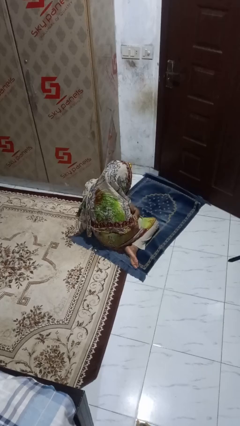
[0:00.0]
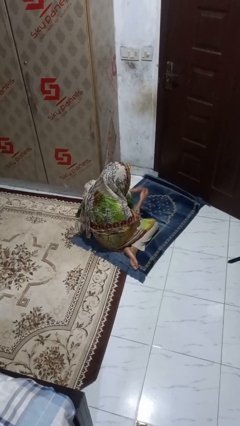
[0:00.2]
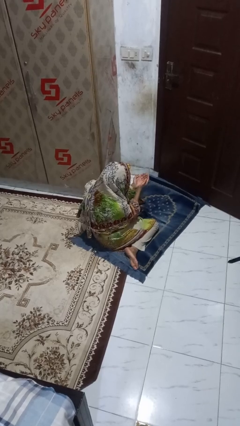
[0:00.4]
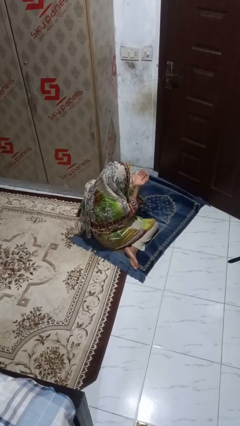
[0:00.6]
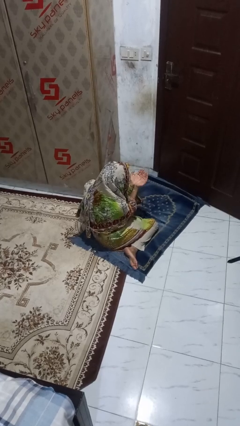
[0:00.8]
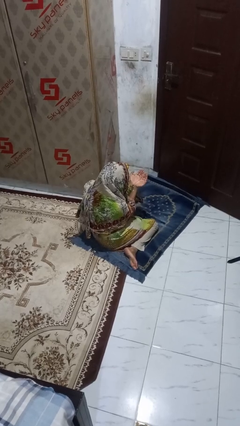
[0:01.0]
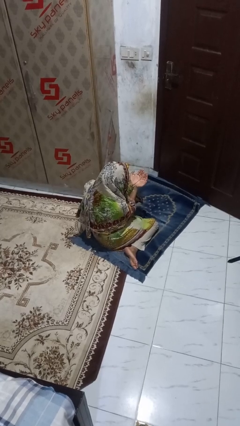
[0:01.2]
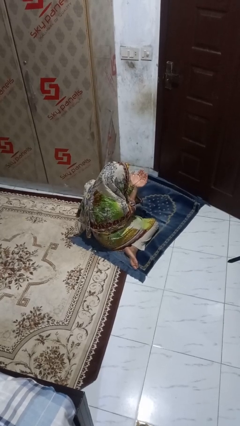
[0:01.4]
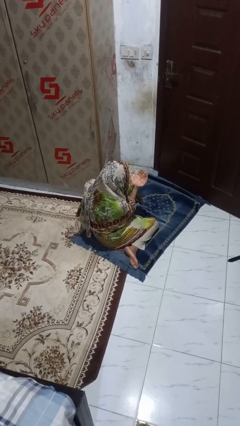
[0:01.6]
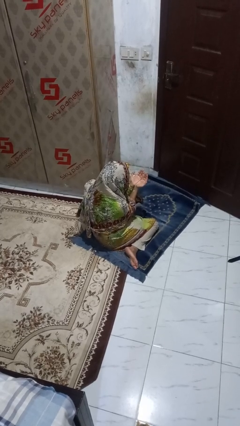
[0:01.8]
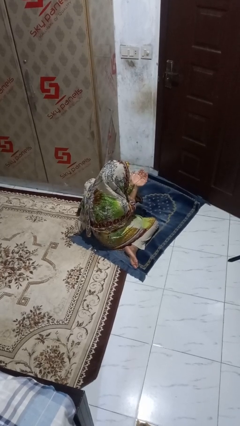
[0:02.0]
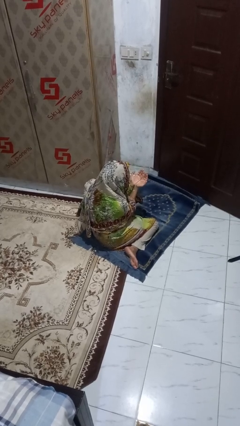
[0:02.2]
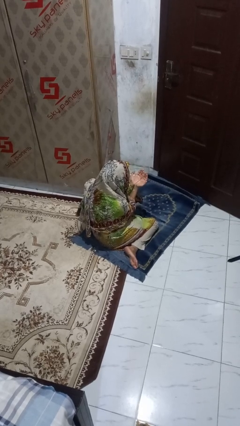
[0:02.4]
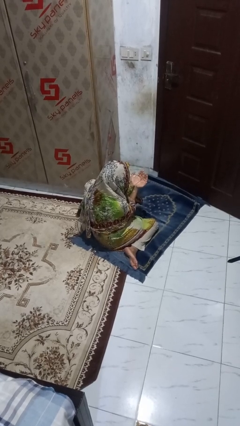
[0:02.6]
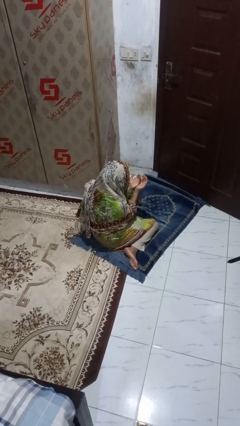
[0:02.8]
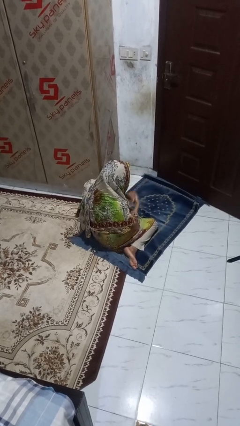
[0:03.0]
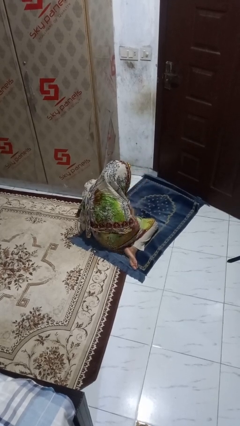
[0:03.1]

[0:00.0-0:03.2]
person prays

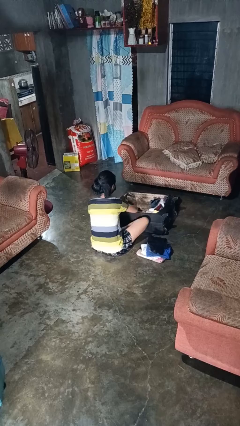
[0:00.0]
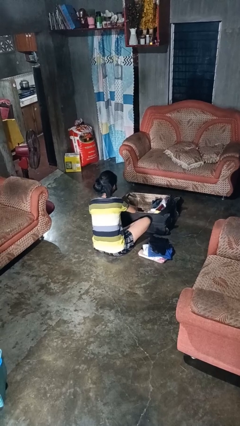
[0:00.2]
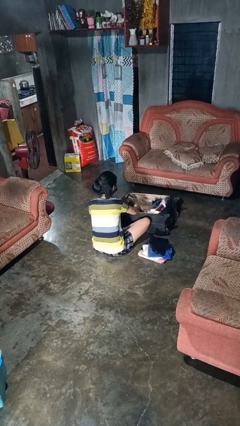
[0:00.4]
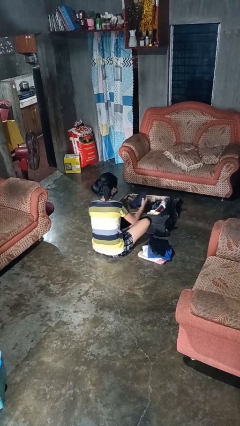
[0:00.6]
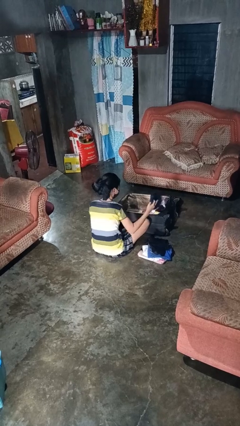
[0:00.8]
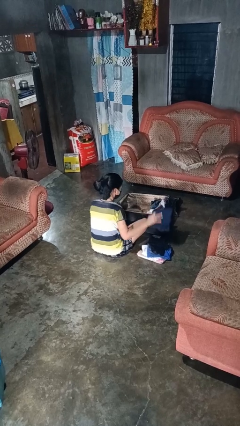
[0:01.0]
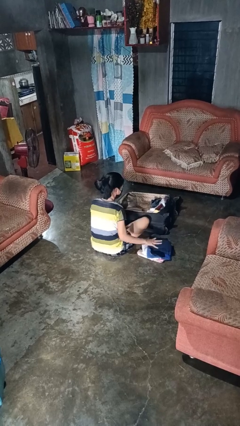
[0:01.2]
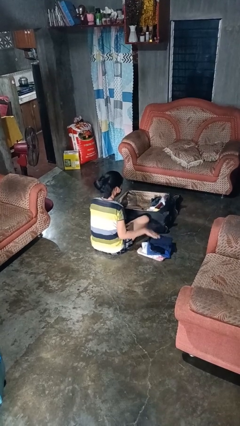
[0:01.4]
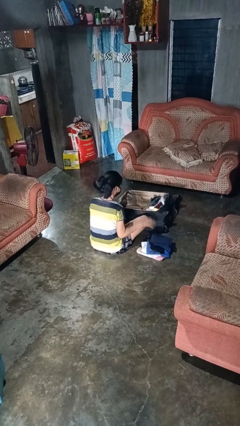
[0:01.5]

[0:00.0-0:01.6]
person unloads clothes from suitcase

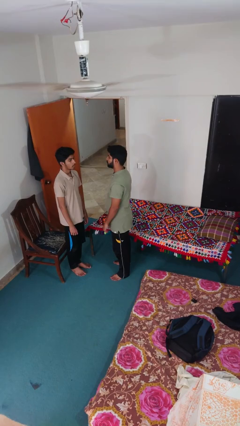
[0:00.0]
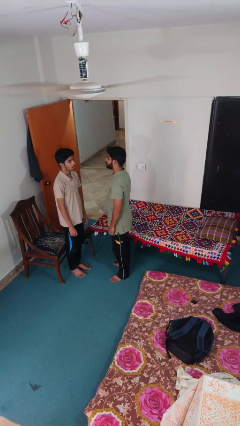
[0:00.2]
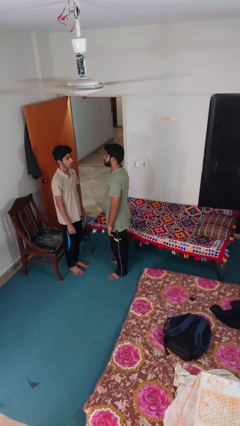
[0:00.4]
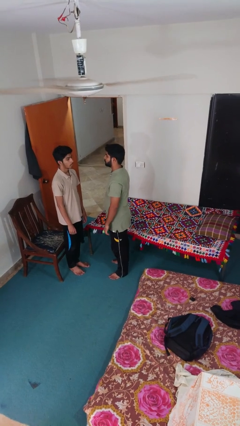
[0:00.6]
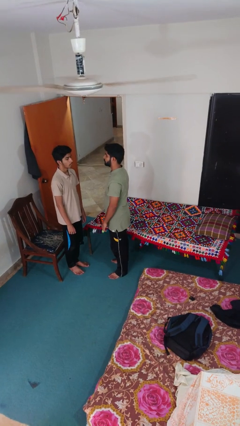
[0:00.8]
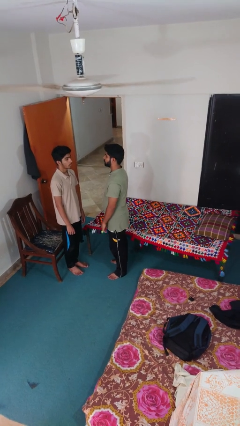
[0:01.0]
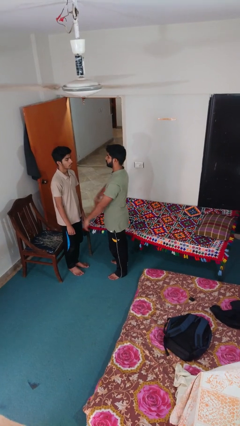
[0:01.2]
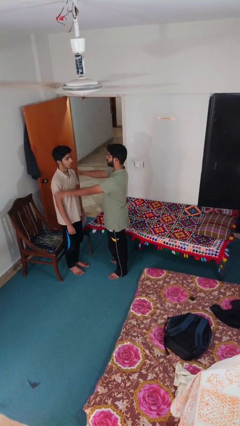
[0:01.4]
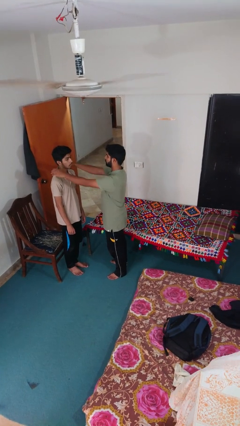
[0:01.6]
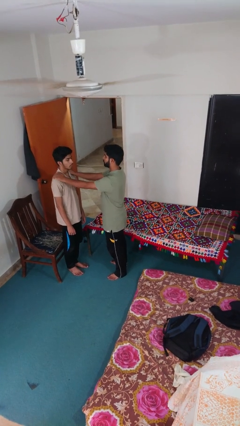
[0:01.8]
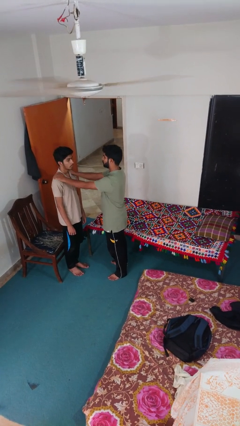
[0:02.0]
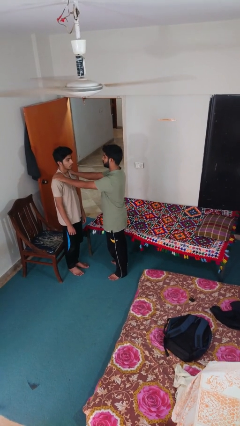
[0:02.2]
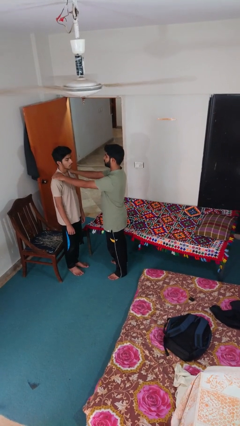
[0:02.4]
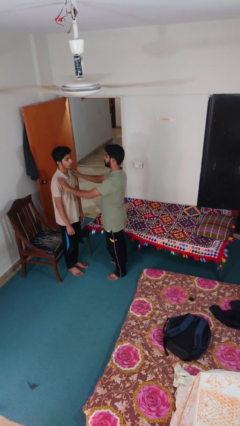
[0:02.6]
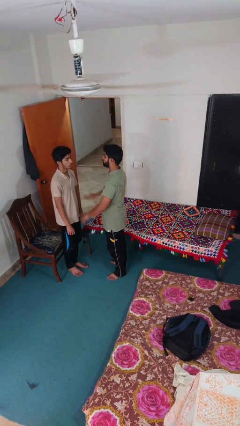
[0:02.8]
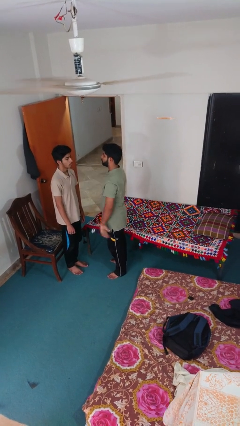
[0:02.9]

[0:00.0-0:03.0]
person pounds shoulders of person

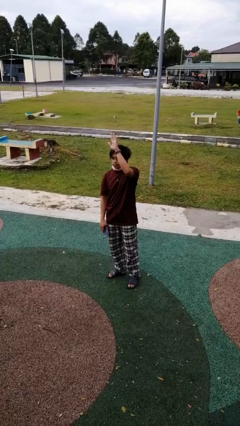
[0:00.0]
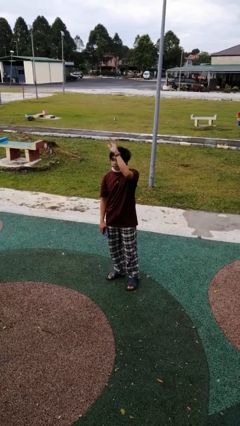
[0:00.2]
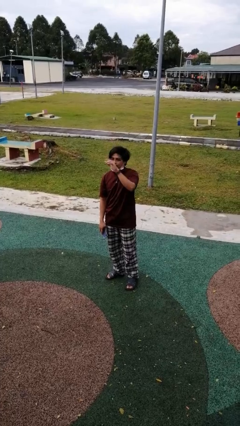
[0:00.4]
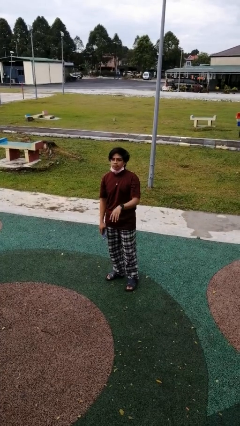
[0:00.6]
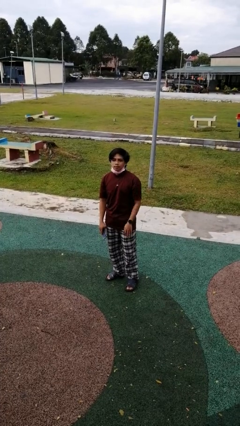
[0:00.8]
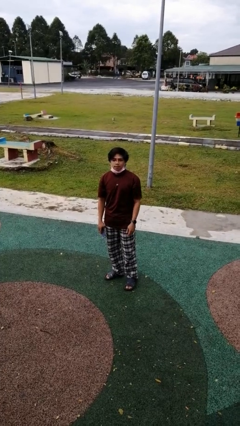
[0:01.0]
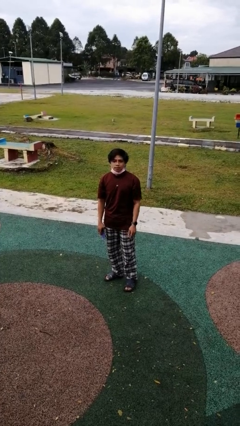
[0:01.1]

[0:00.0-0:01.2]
person gestures lower hand

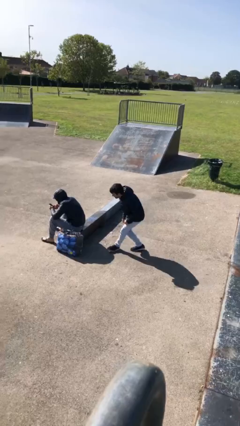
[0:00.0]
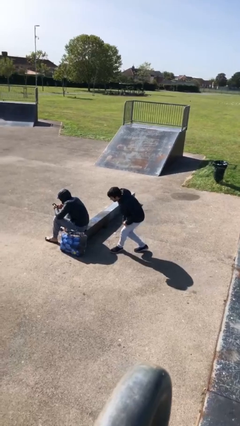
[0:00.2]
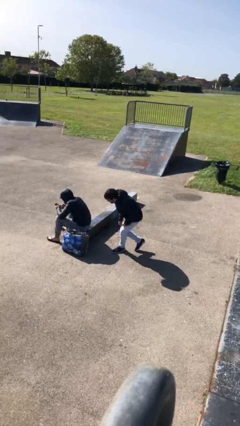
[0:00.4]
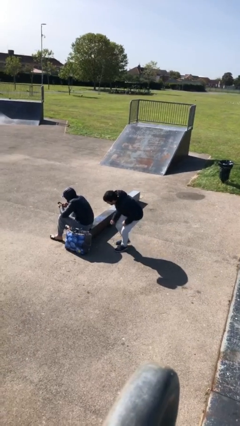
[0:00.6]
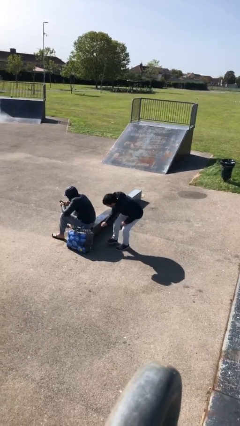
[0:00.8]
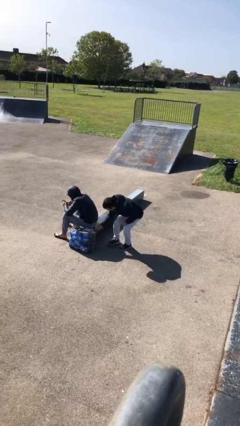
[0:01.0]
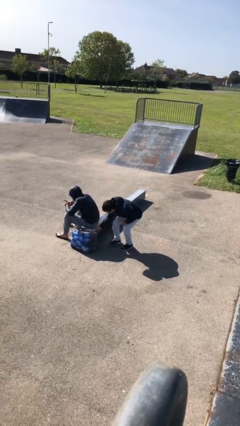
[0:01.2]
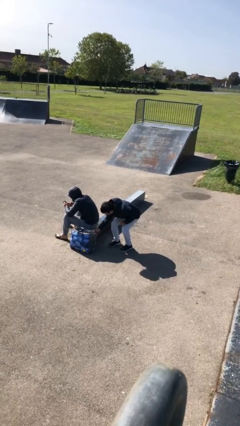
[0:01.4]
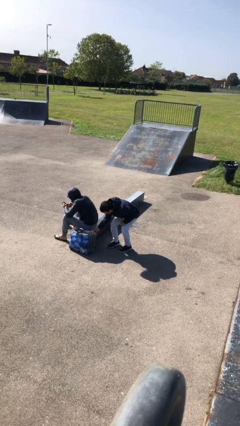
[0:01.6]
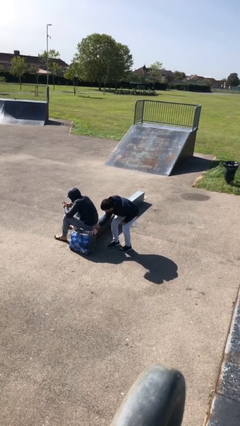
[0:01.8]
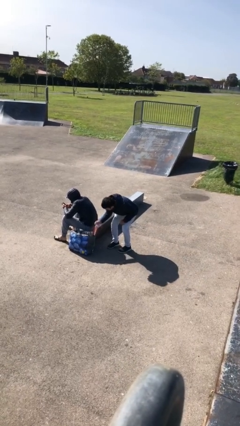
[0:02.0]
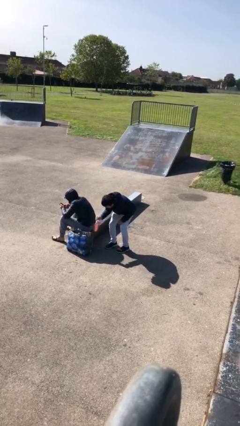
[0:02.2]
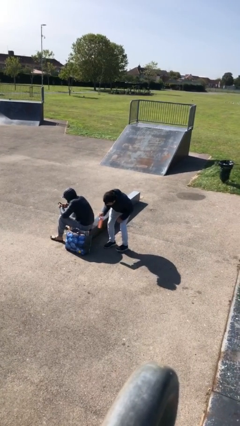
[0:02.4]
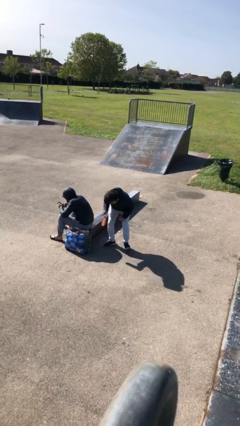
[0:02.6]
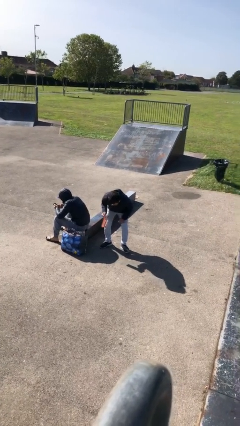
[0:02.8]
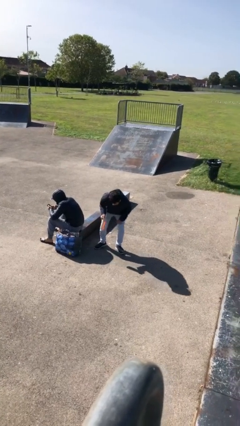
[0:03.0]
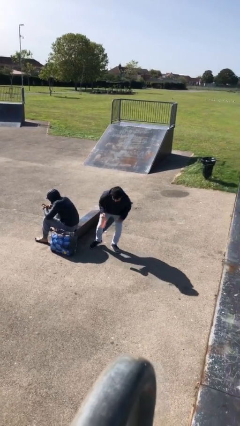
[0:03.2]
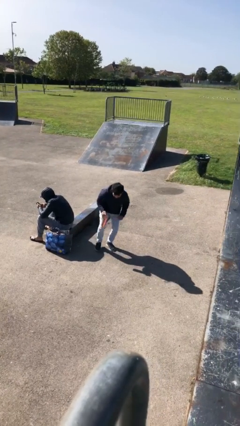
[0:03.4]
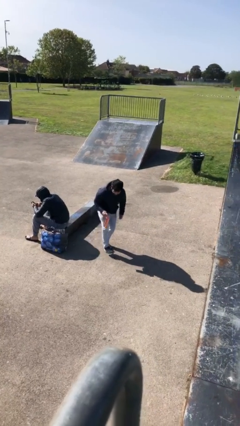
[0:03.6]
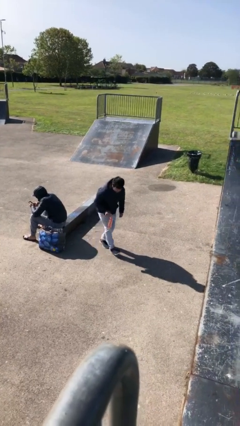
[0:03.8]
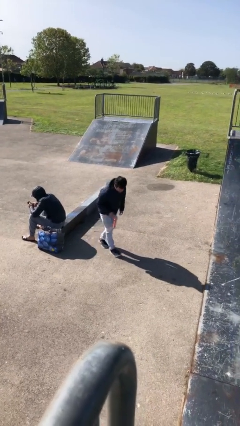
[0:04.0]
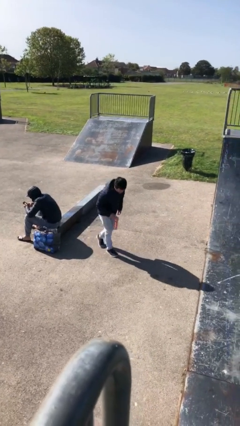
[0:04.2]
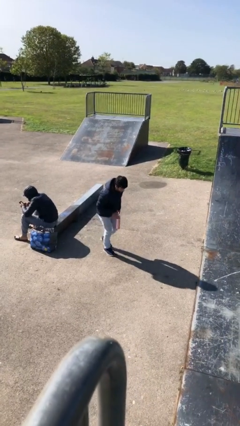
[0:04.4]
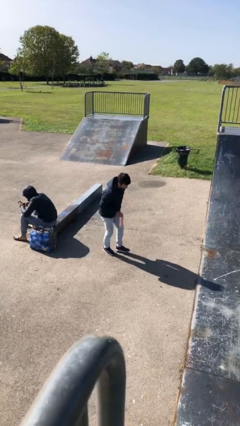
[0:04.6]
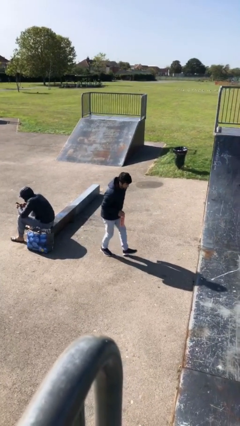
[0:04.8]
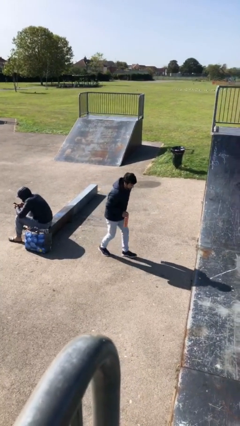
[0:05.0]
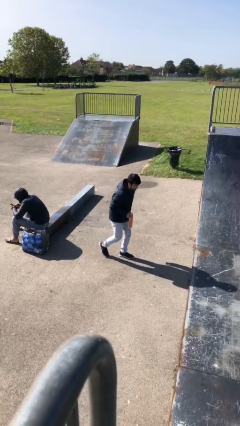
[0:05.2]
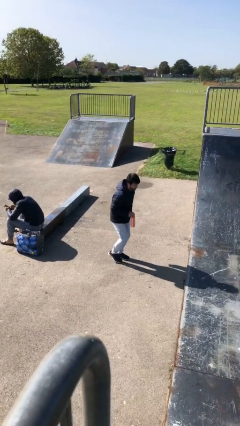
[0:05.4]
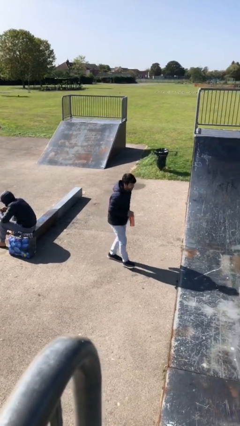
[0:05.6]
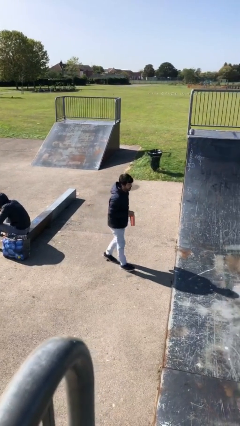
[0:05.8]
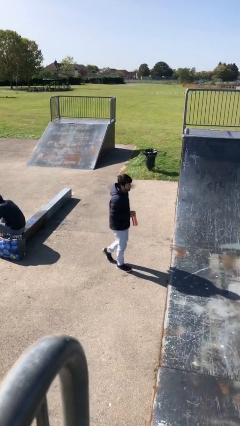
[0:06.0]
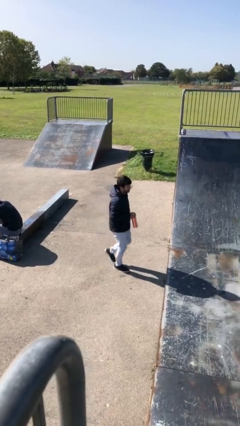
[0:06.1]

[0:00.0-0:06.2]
person steals object from person

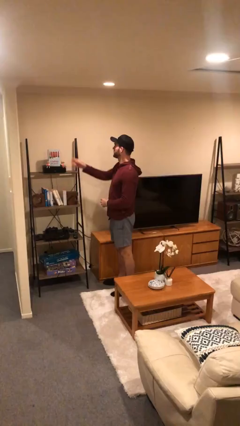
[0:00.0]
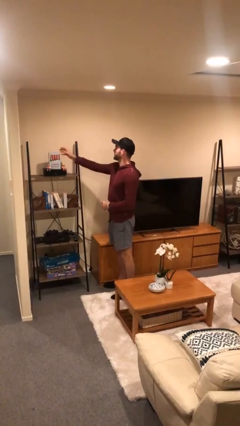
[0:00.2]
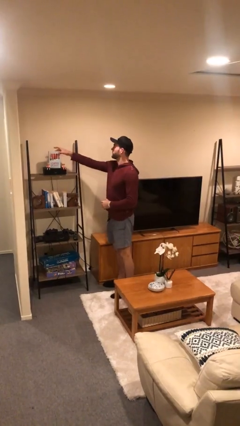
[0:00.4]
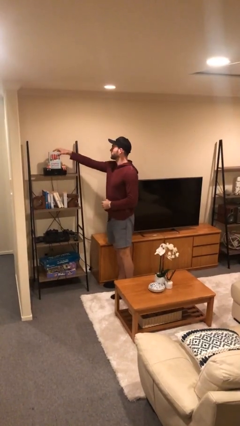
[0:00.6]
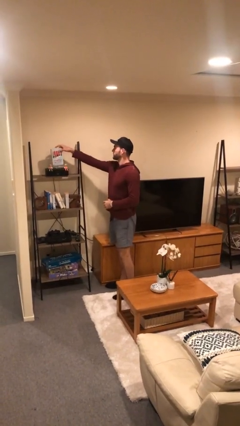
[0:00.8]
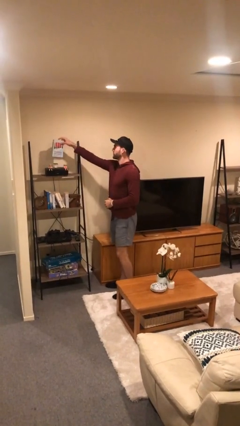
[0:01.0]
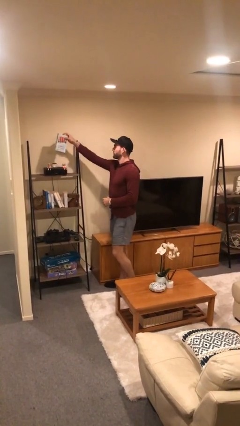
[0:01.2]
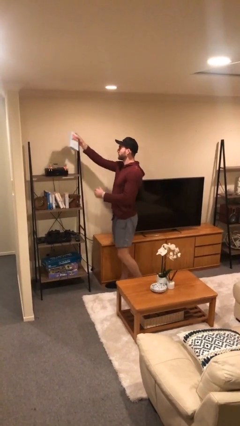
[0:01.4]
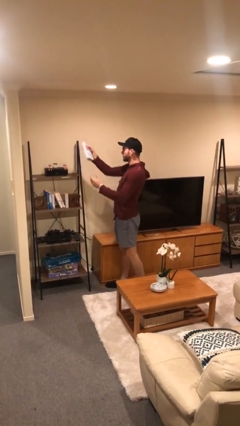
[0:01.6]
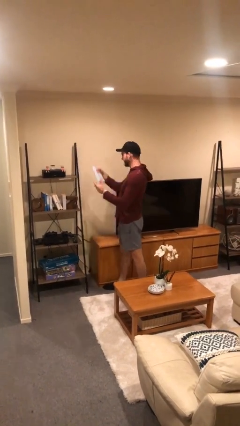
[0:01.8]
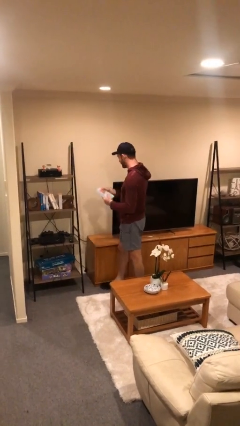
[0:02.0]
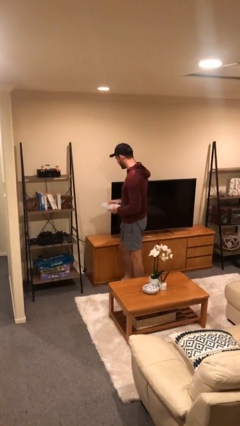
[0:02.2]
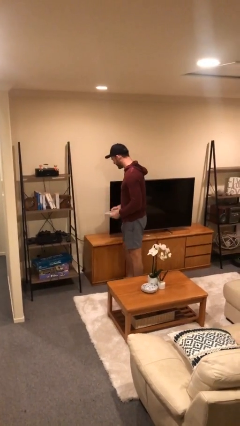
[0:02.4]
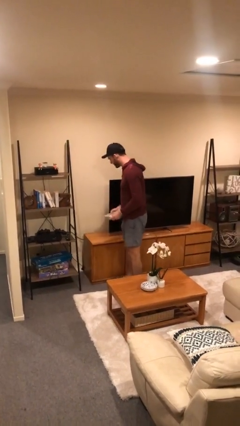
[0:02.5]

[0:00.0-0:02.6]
person picks up object from shelf
